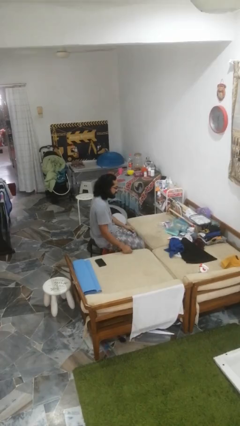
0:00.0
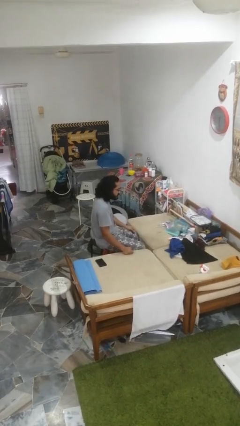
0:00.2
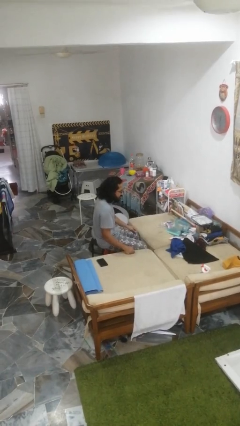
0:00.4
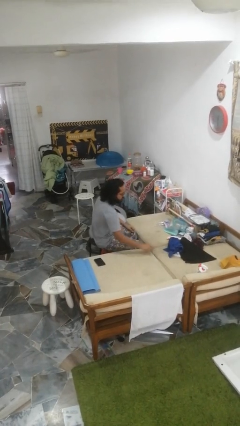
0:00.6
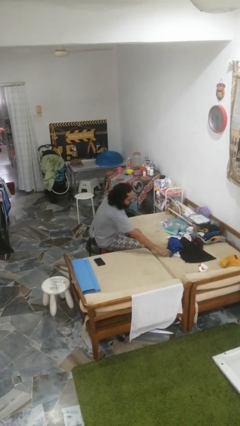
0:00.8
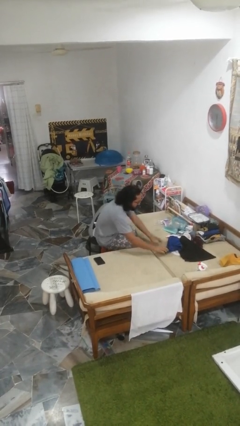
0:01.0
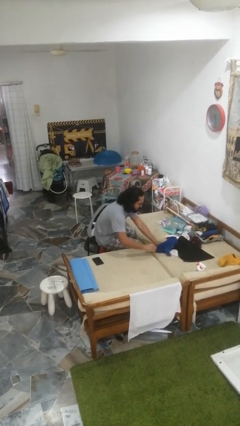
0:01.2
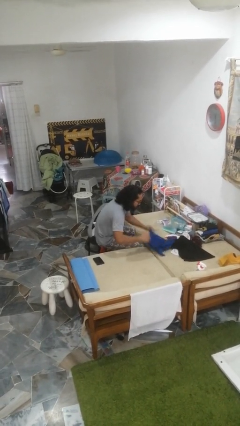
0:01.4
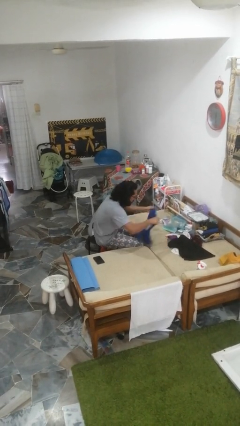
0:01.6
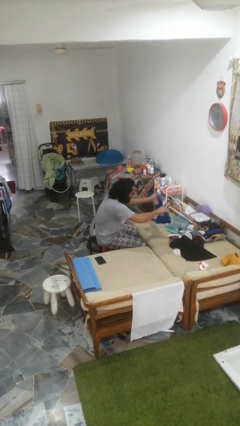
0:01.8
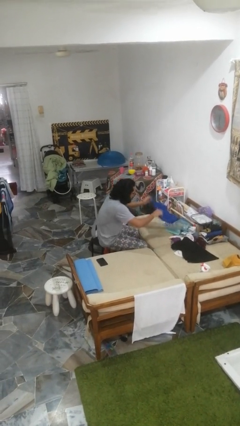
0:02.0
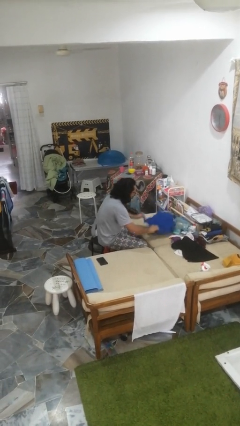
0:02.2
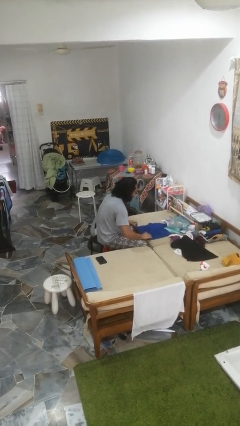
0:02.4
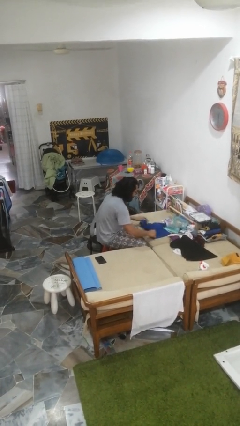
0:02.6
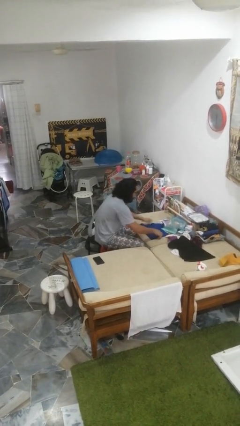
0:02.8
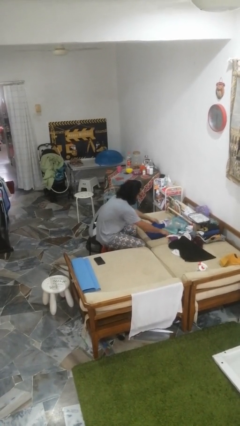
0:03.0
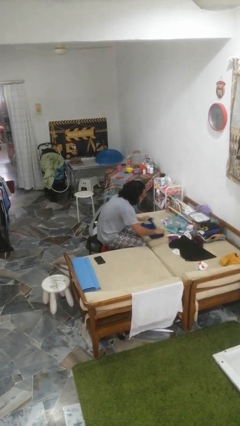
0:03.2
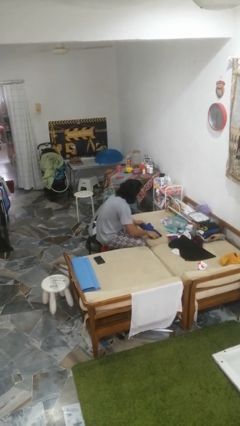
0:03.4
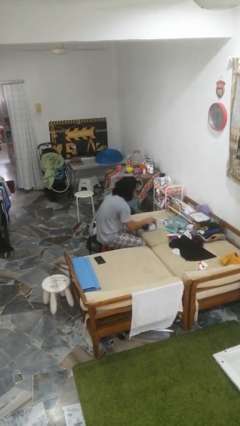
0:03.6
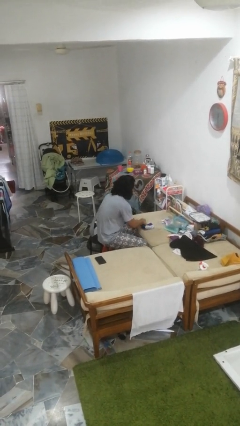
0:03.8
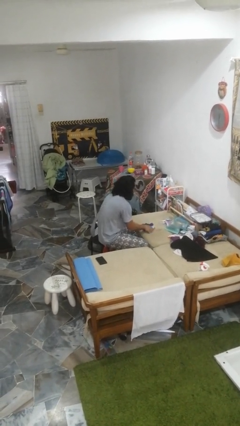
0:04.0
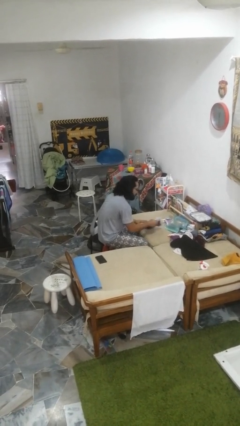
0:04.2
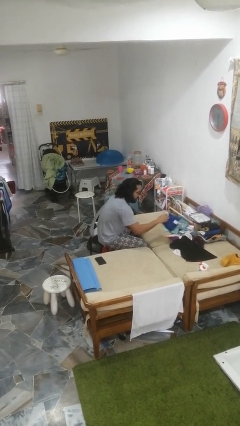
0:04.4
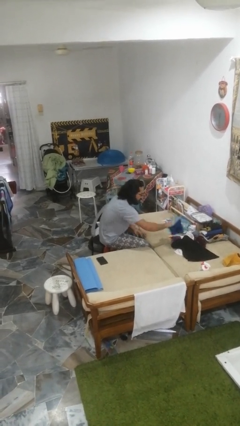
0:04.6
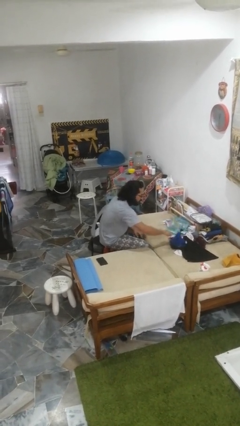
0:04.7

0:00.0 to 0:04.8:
person folds shirt

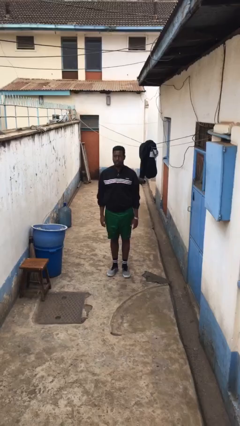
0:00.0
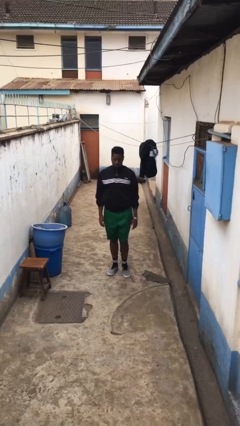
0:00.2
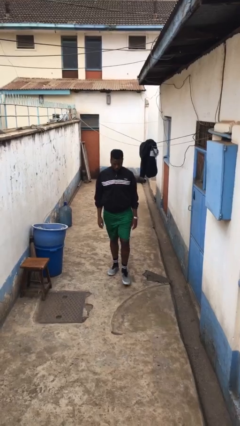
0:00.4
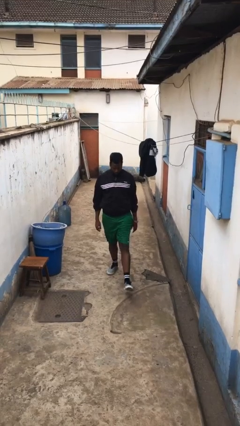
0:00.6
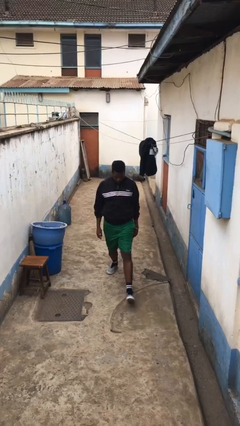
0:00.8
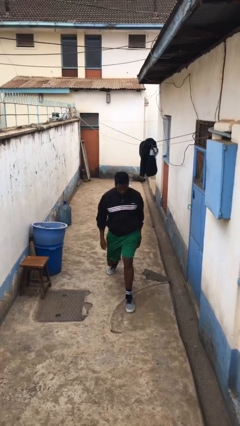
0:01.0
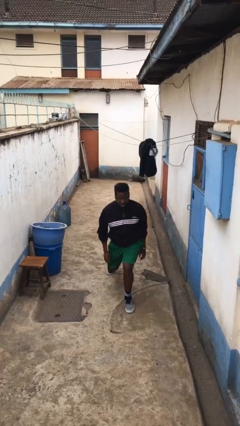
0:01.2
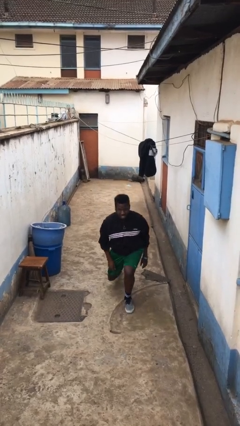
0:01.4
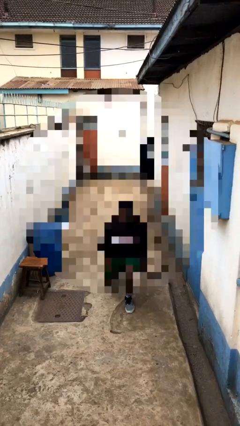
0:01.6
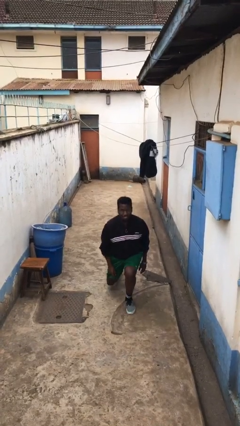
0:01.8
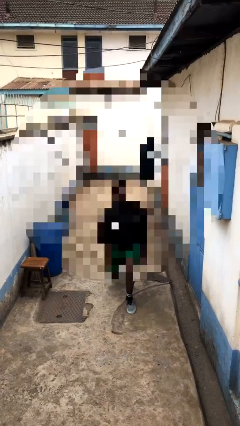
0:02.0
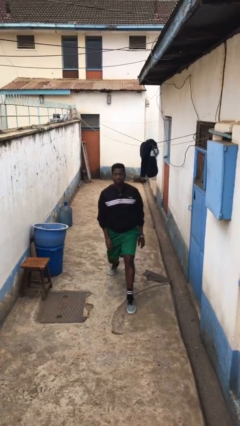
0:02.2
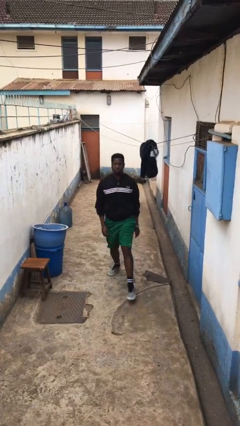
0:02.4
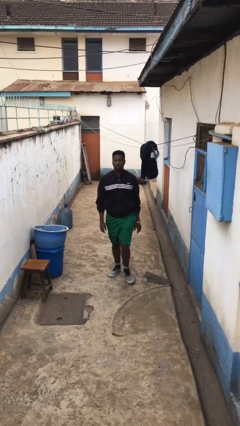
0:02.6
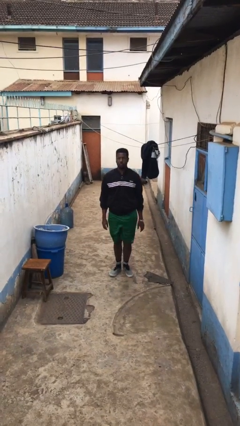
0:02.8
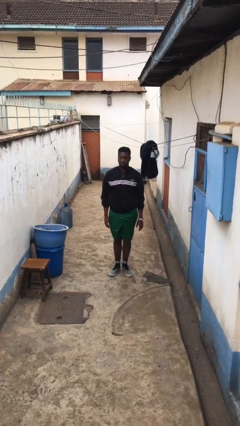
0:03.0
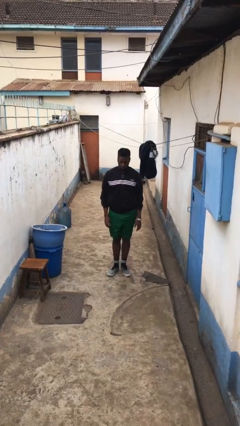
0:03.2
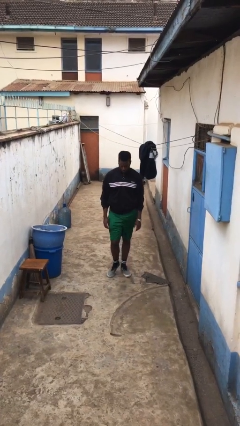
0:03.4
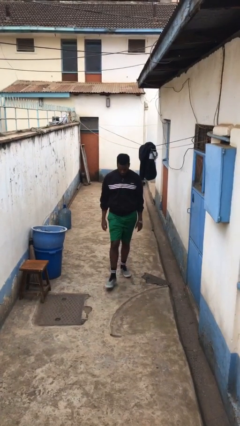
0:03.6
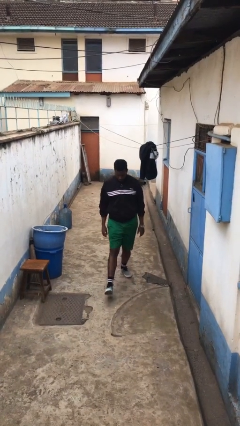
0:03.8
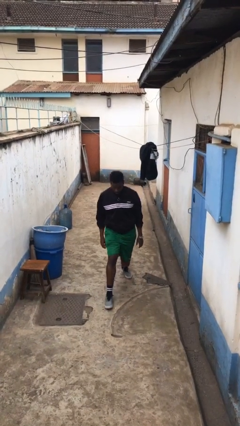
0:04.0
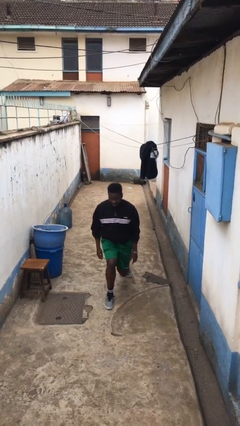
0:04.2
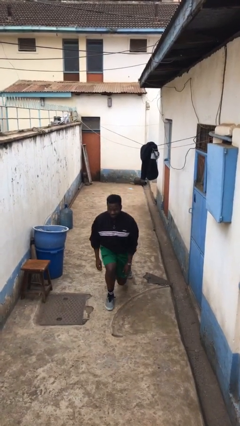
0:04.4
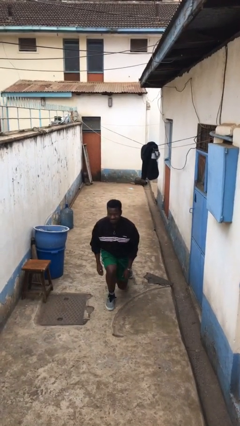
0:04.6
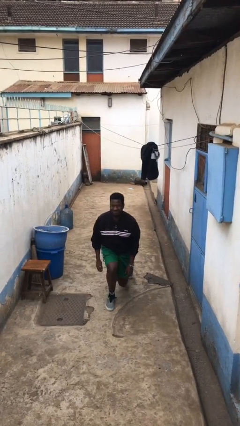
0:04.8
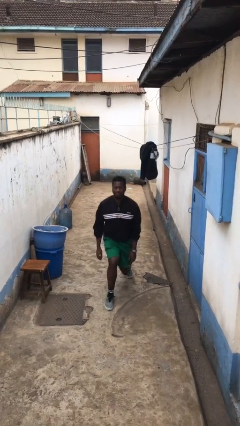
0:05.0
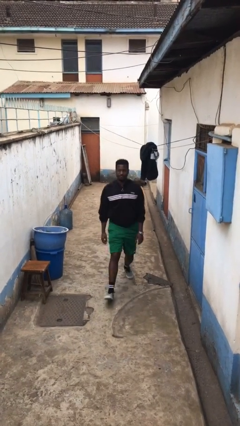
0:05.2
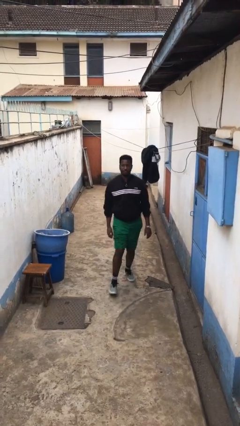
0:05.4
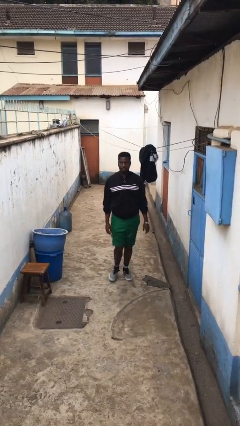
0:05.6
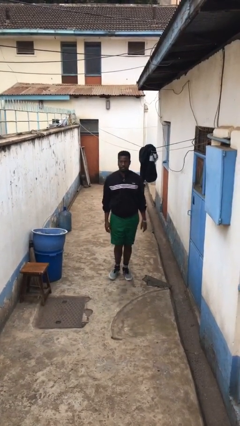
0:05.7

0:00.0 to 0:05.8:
person exercises with lunges

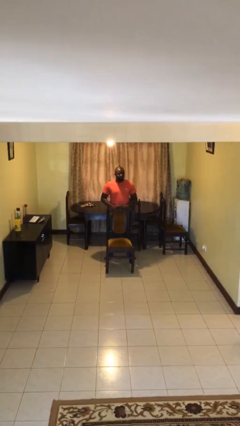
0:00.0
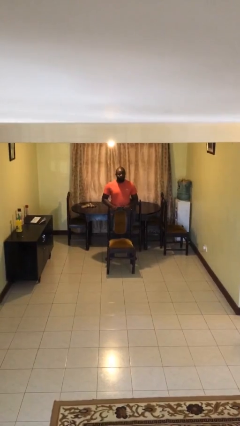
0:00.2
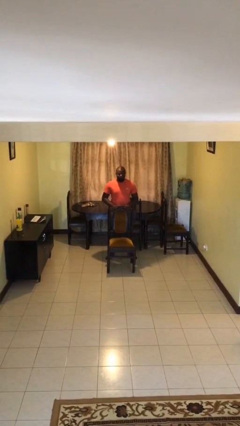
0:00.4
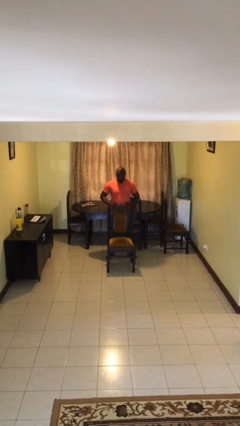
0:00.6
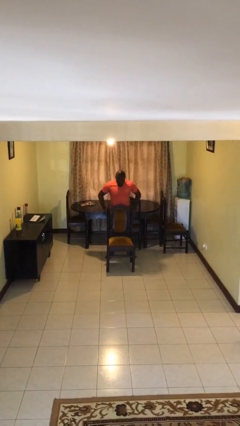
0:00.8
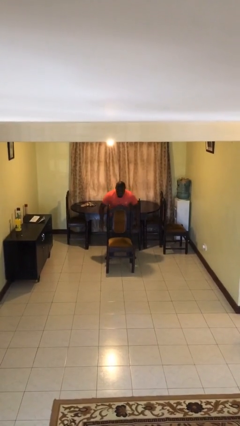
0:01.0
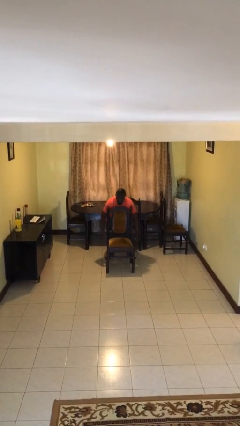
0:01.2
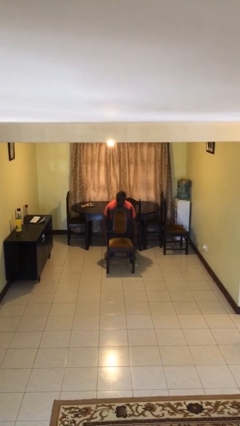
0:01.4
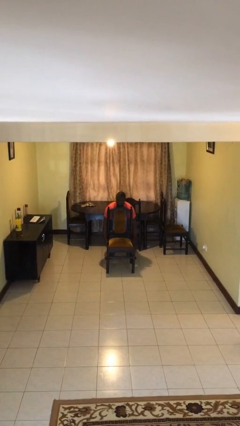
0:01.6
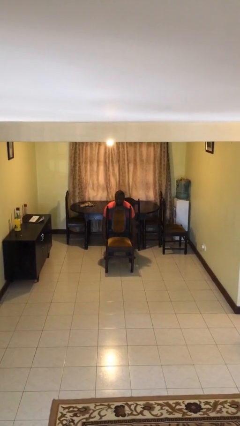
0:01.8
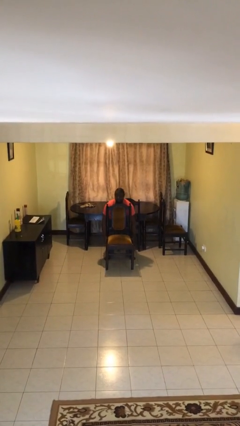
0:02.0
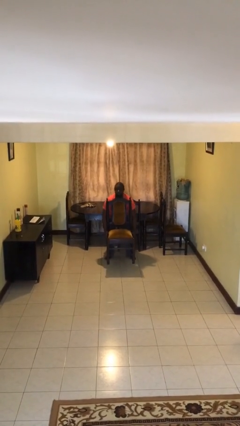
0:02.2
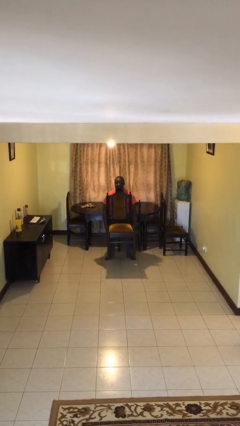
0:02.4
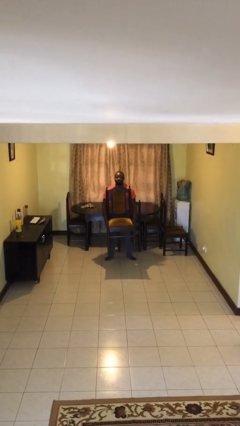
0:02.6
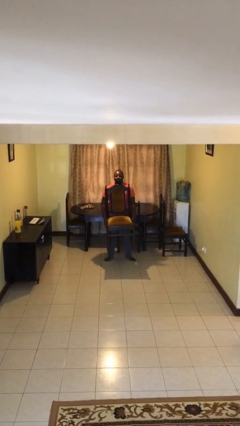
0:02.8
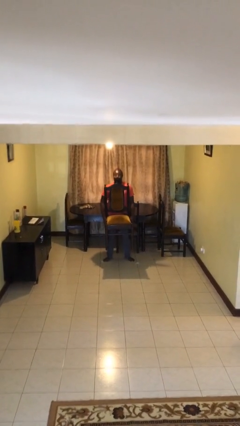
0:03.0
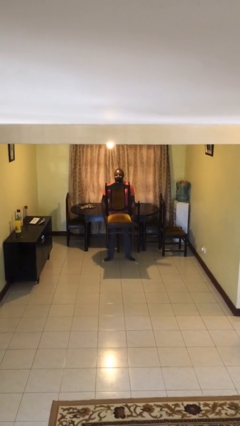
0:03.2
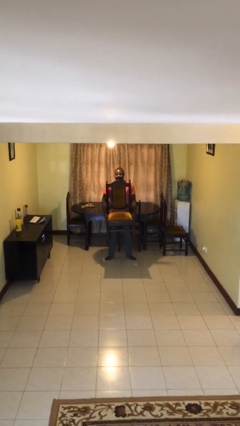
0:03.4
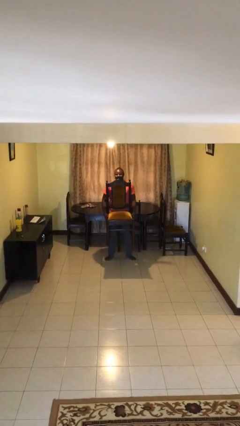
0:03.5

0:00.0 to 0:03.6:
person picks up object from floor

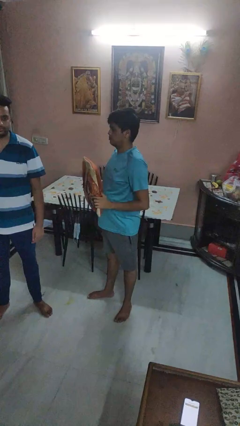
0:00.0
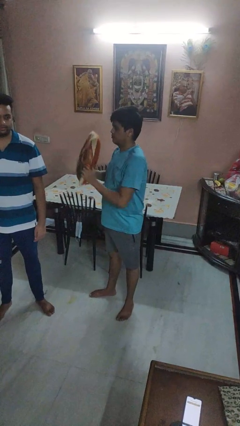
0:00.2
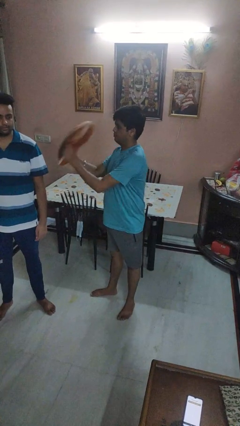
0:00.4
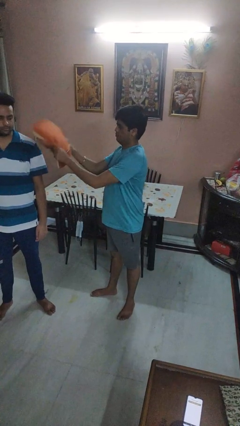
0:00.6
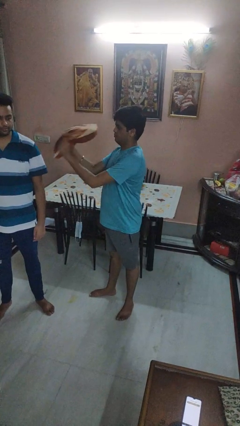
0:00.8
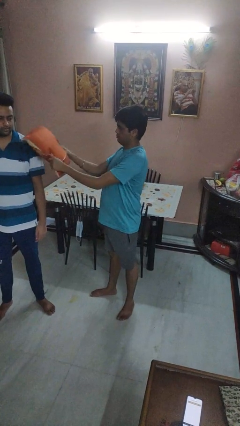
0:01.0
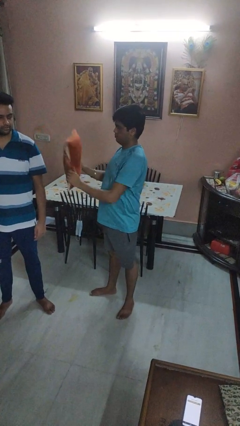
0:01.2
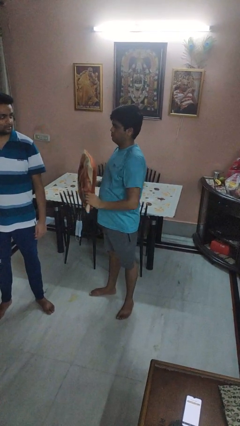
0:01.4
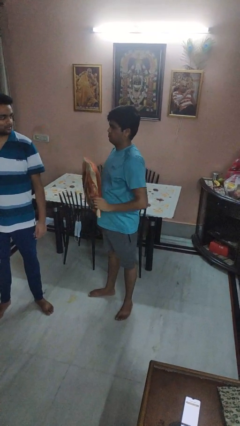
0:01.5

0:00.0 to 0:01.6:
person hits person with pillow

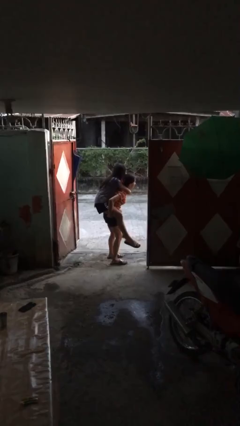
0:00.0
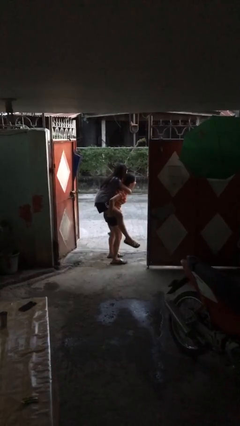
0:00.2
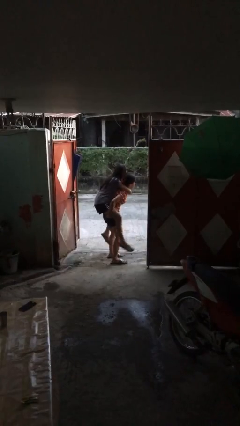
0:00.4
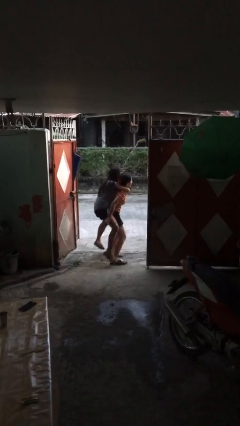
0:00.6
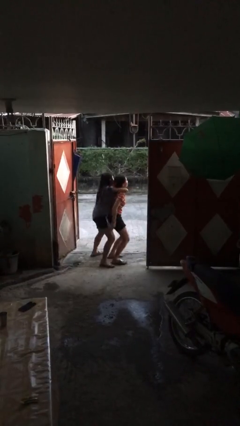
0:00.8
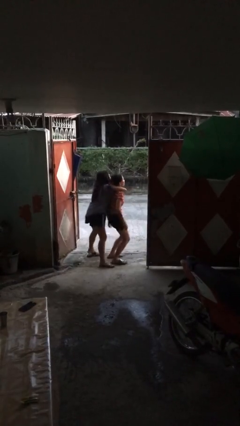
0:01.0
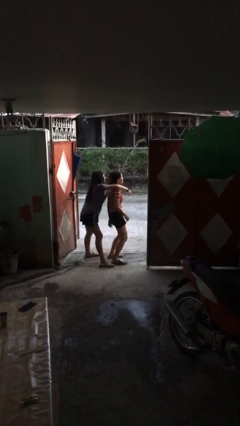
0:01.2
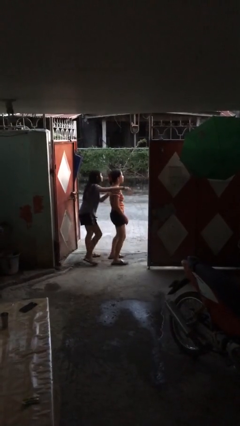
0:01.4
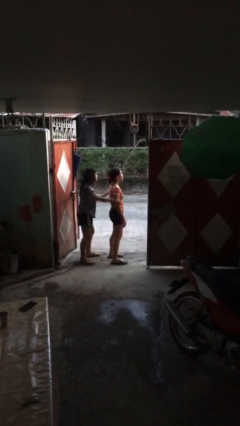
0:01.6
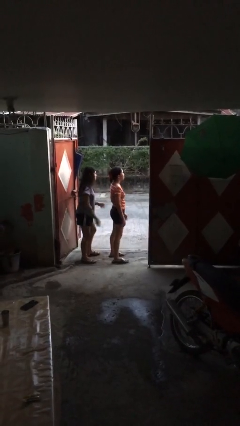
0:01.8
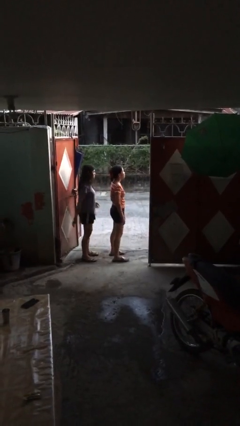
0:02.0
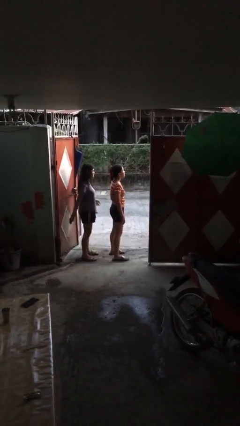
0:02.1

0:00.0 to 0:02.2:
person puts down person
